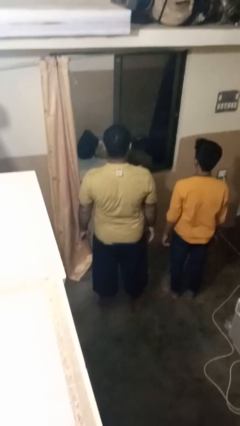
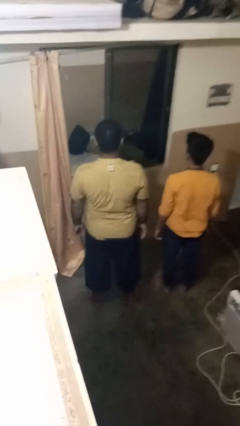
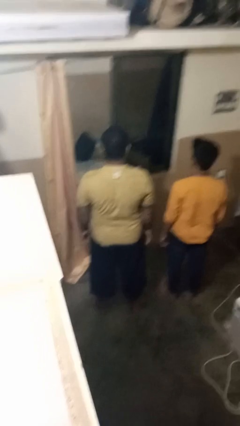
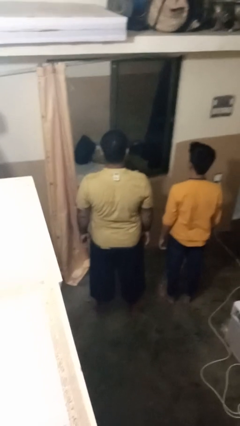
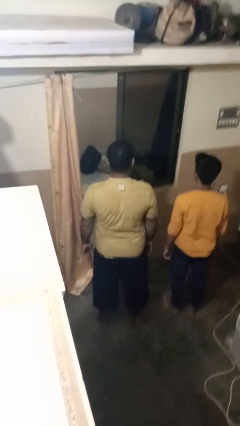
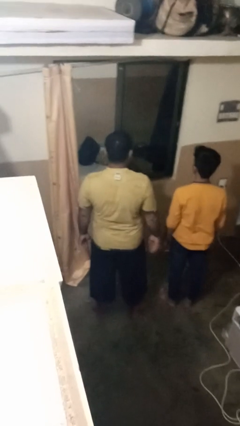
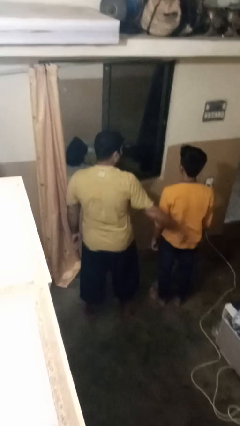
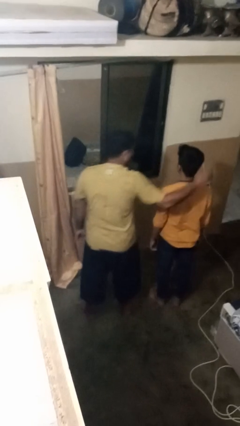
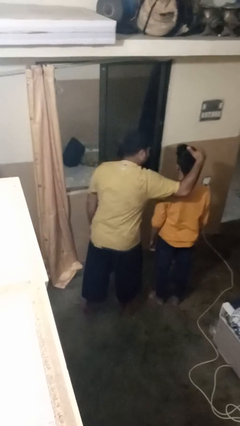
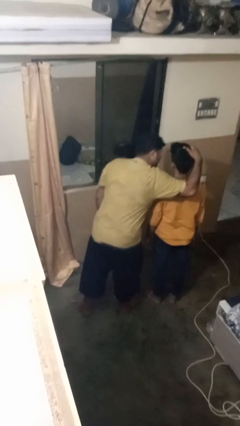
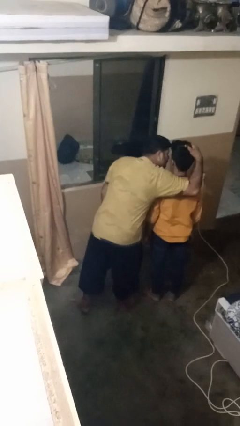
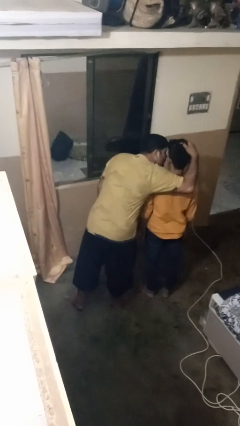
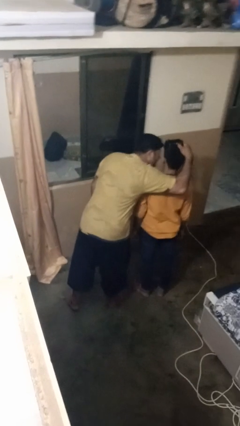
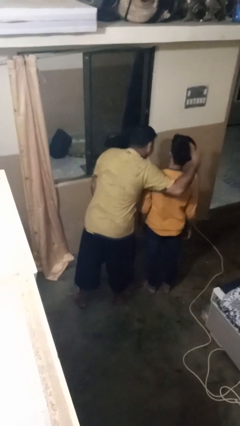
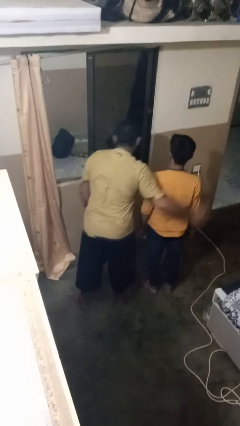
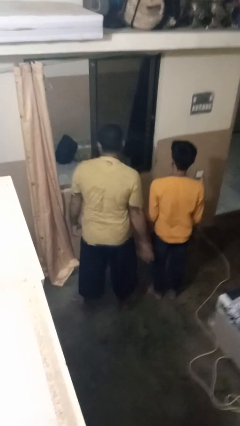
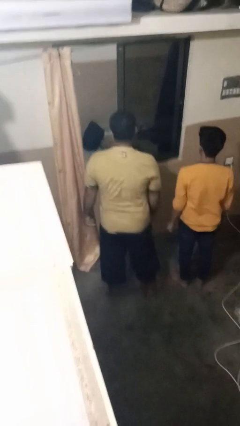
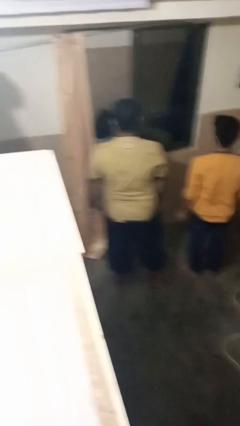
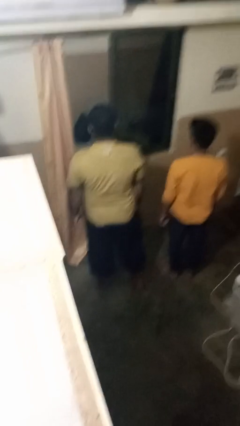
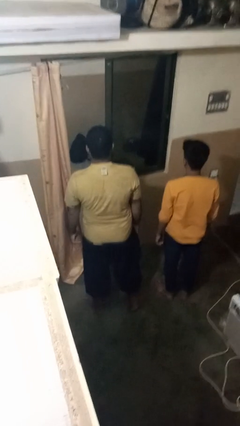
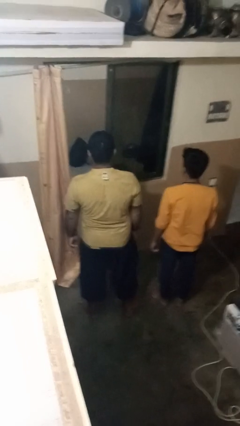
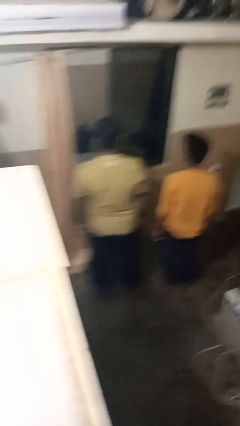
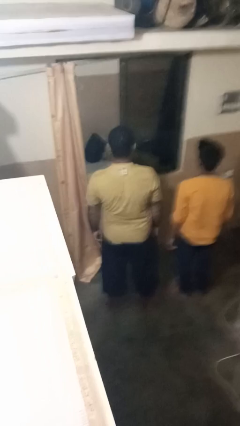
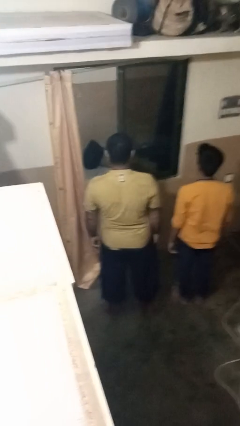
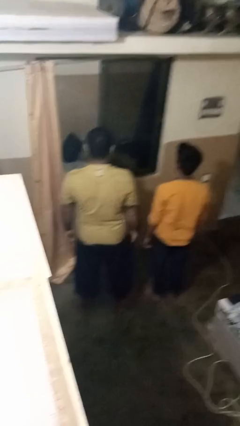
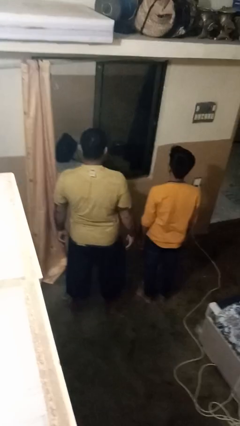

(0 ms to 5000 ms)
person kisses cheek of person

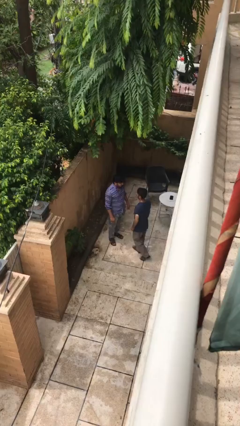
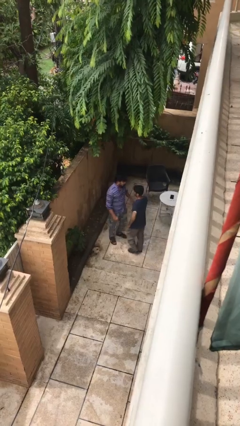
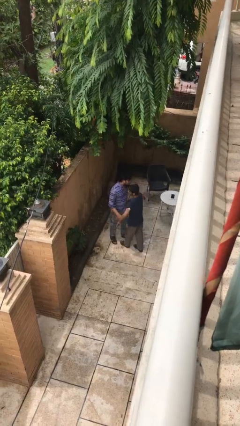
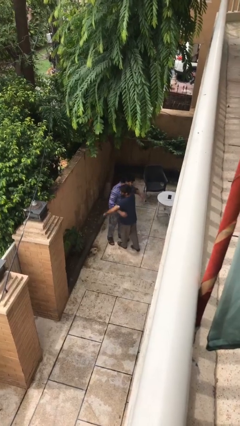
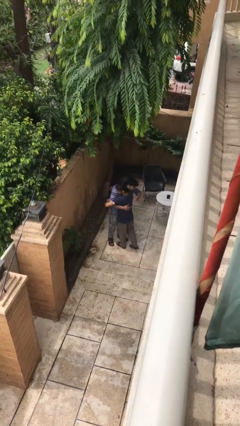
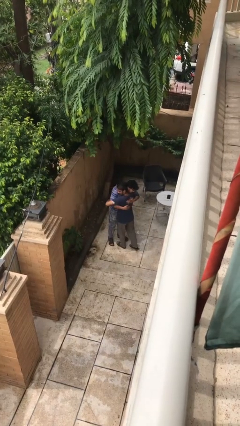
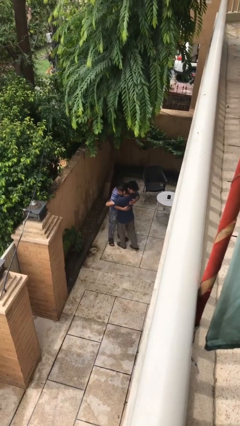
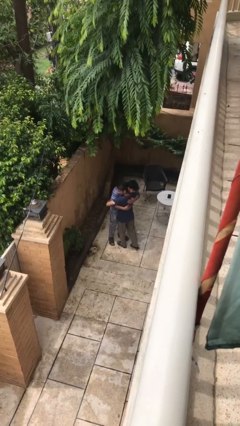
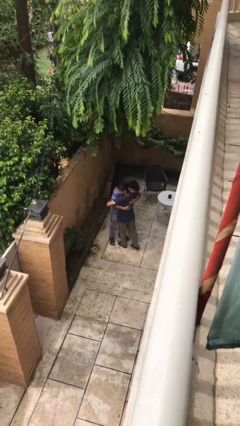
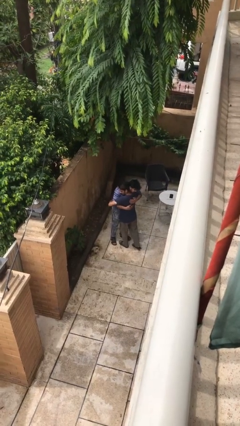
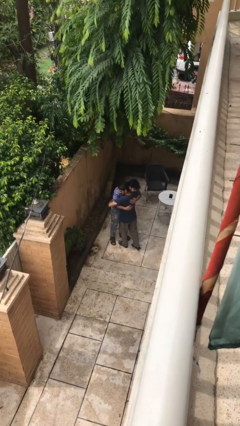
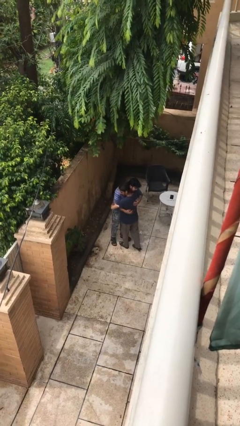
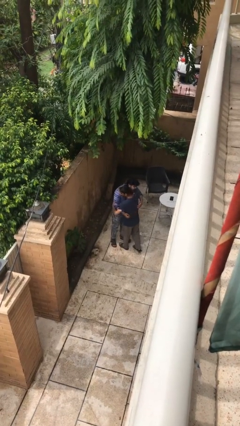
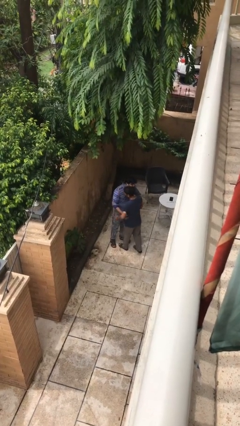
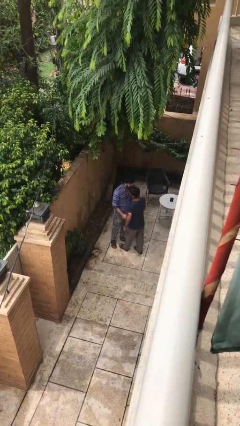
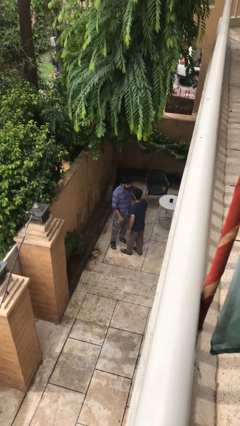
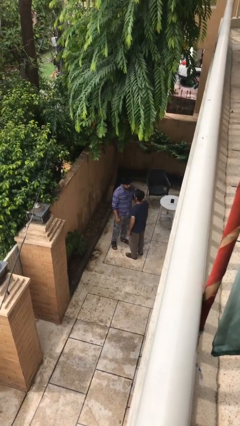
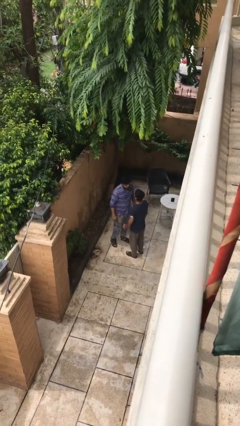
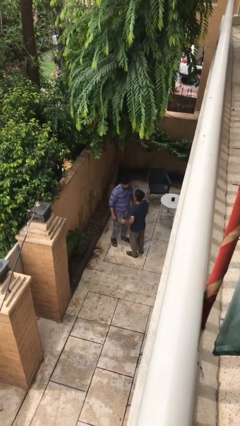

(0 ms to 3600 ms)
person embraces person

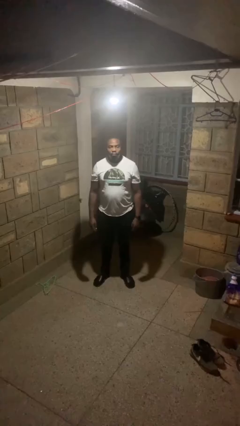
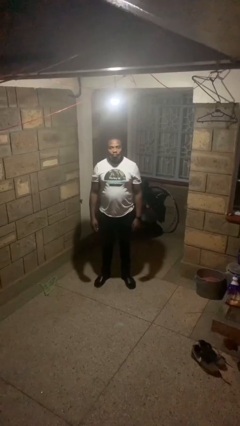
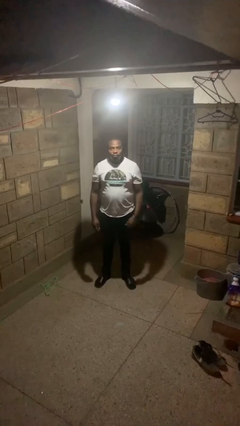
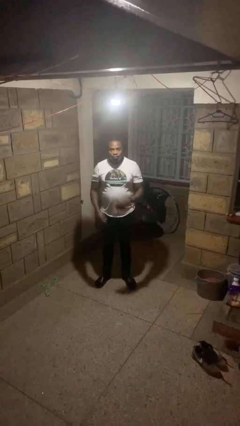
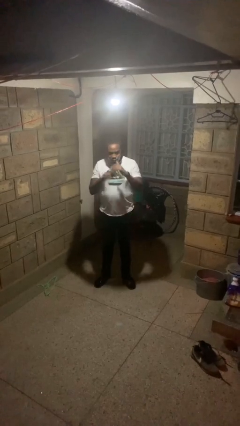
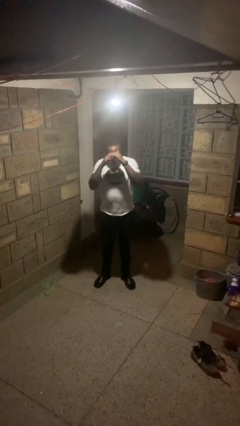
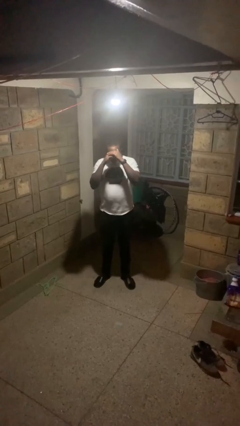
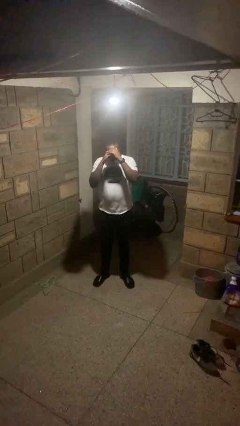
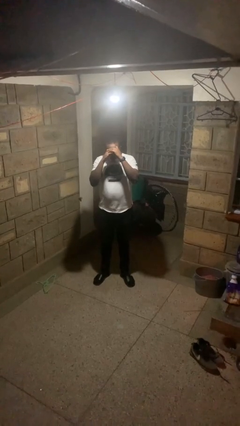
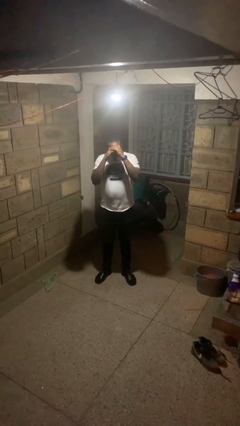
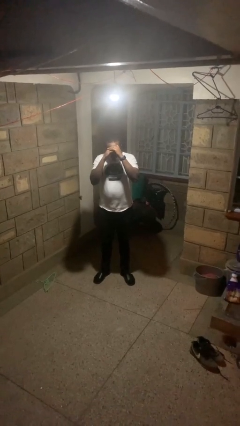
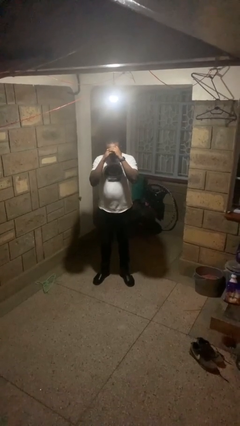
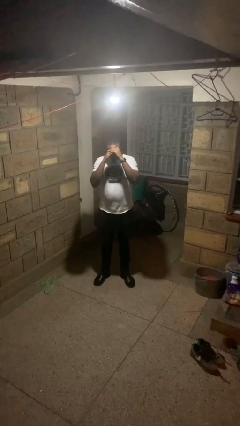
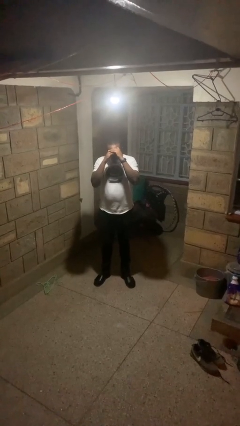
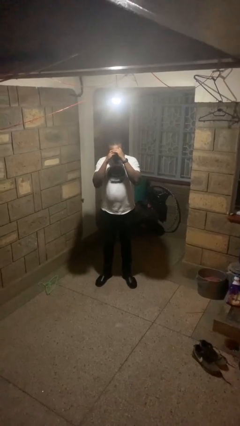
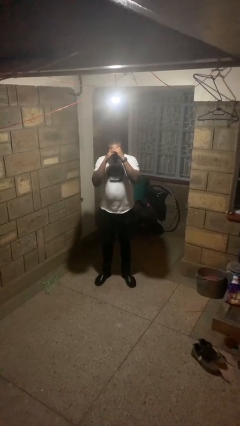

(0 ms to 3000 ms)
person shades eyes

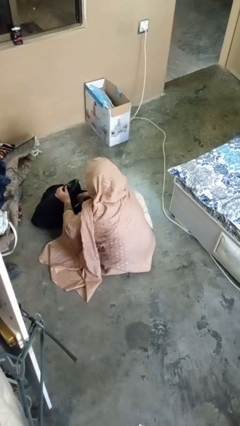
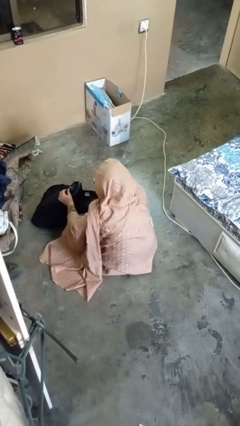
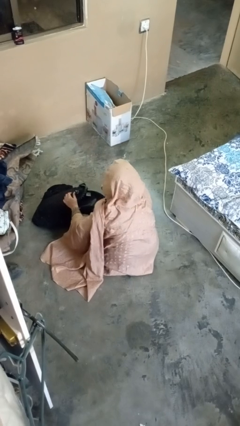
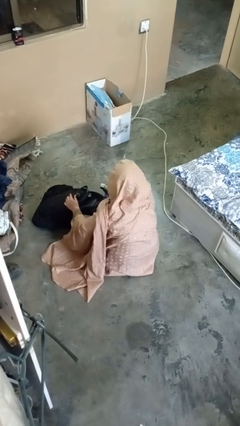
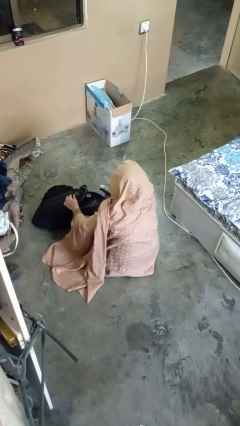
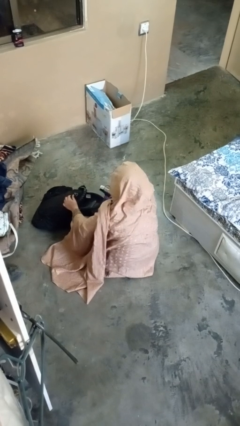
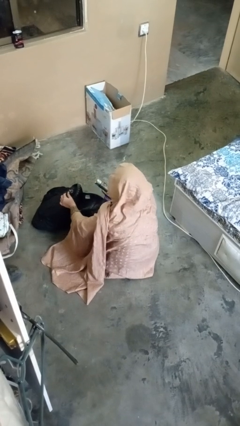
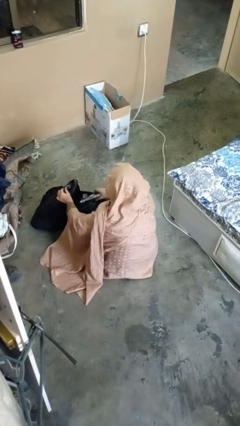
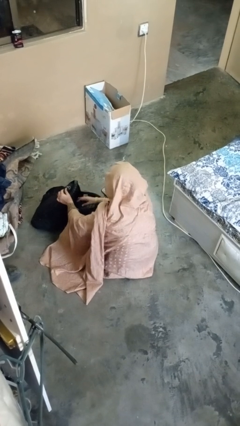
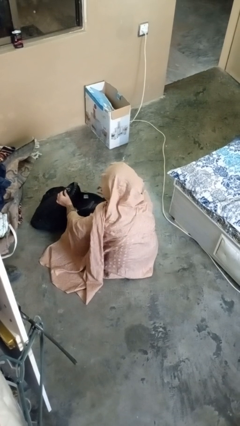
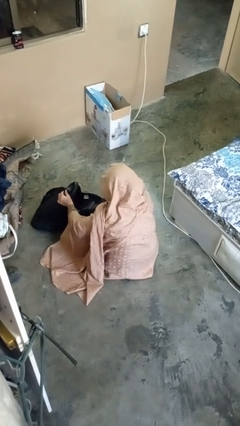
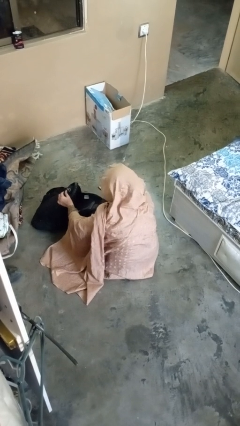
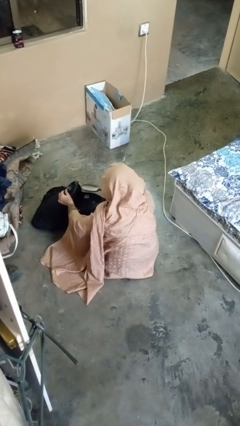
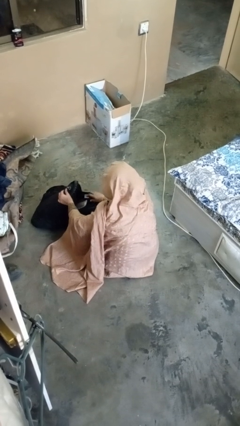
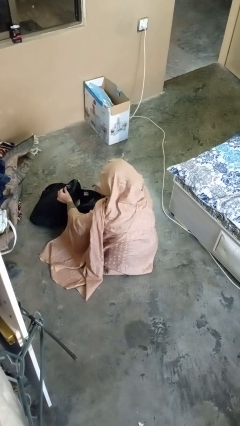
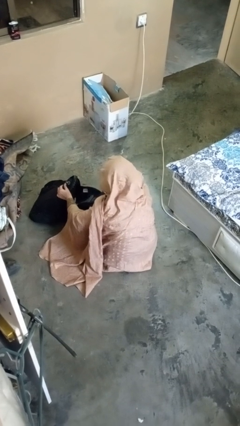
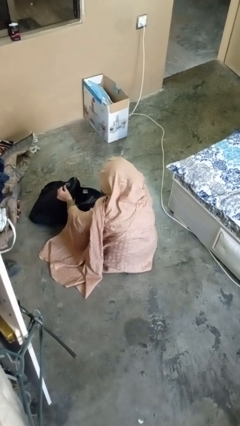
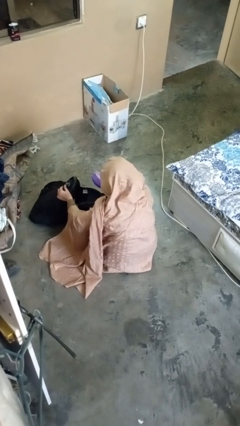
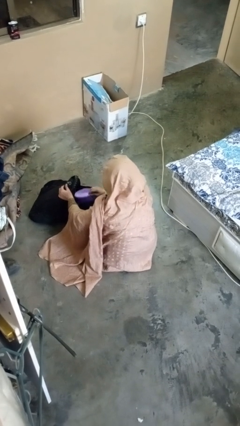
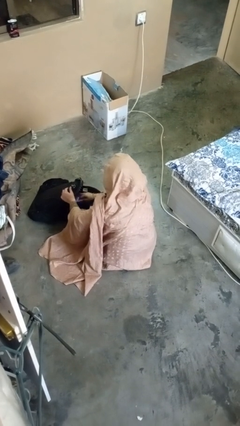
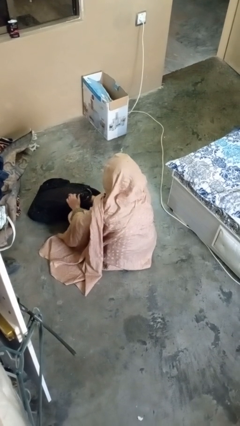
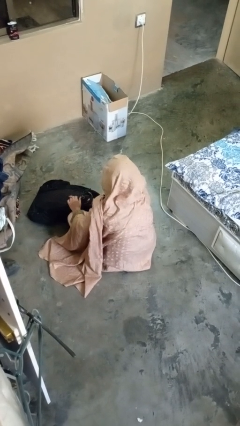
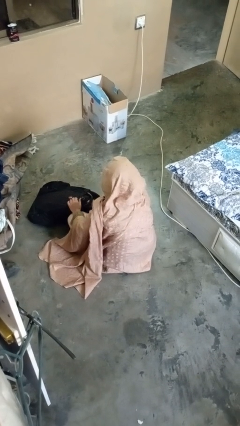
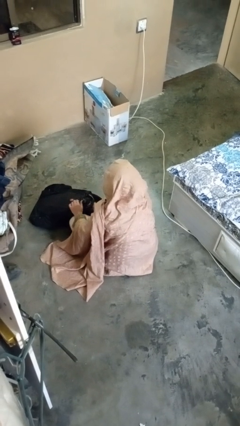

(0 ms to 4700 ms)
person puts object into backpack

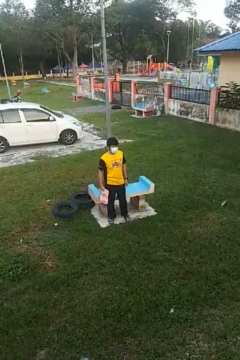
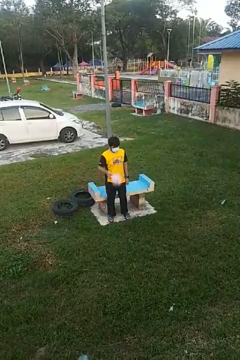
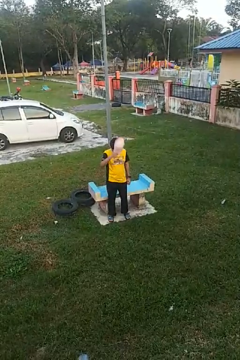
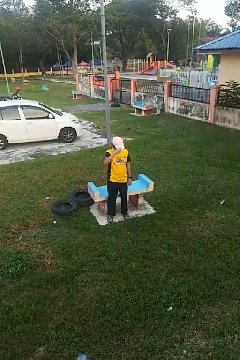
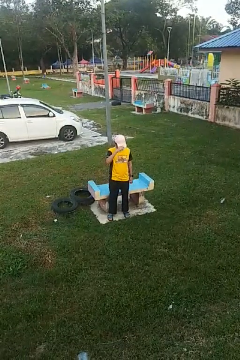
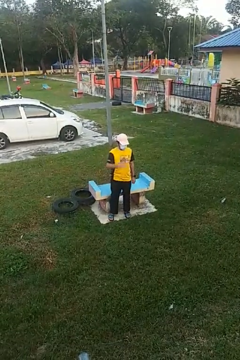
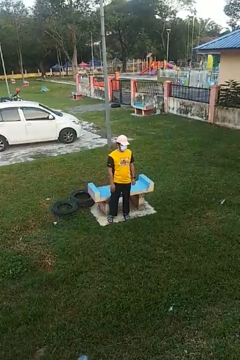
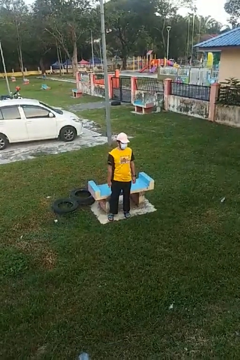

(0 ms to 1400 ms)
person puts on hat

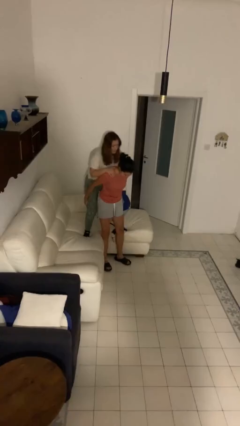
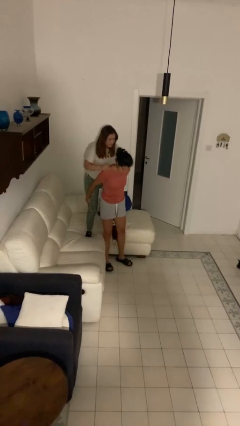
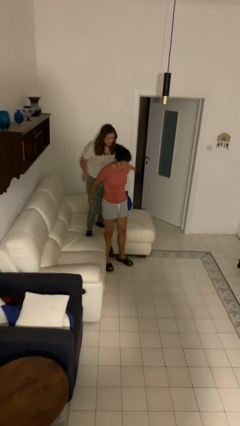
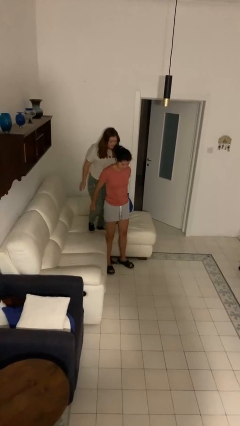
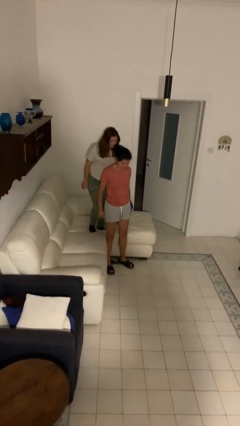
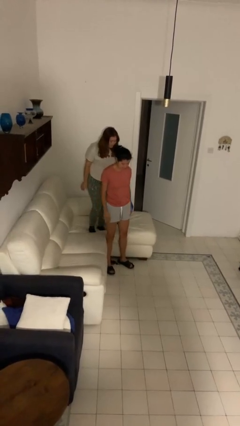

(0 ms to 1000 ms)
person puts down person
